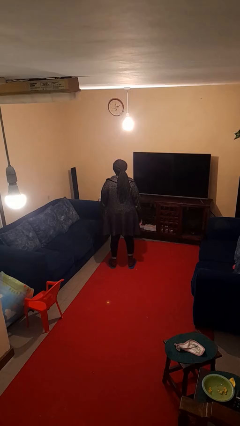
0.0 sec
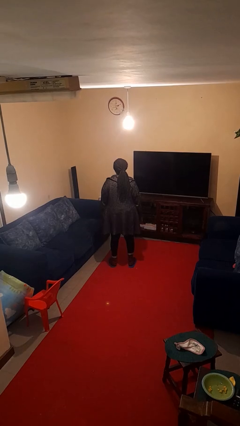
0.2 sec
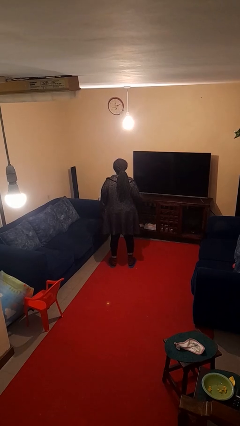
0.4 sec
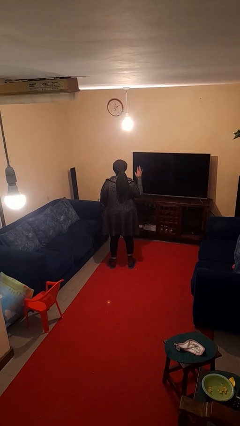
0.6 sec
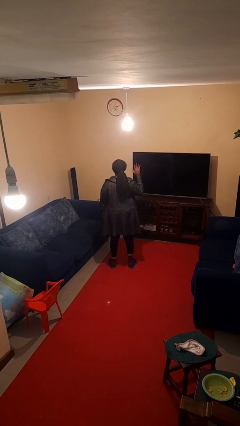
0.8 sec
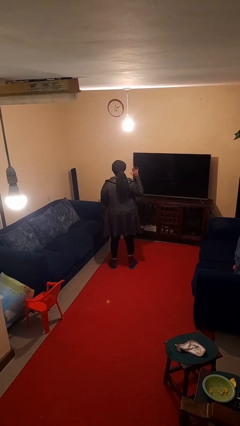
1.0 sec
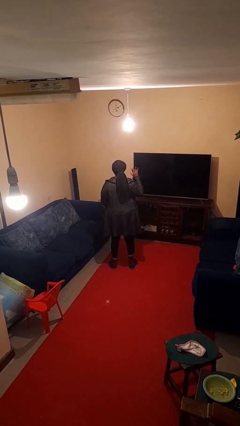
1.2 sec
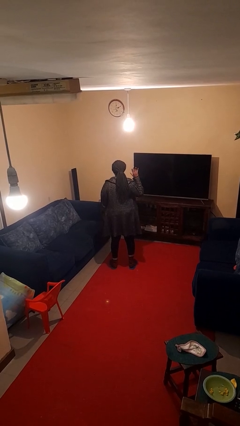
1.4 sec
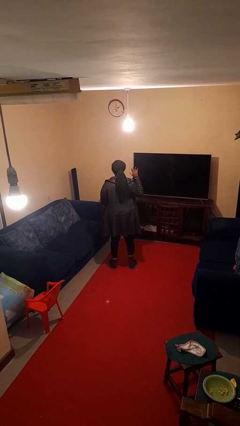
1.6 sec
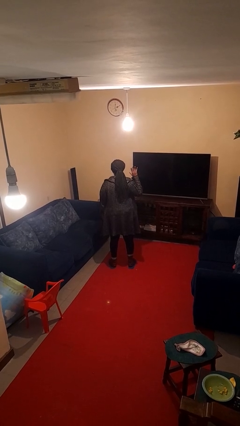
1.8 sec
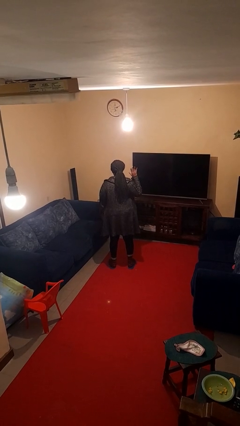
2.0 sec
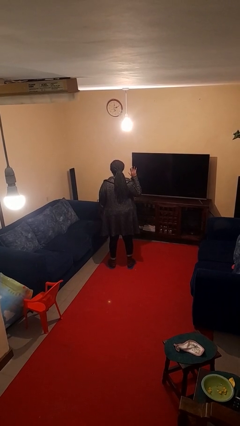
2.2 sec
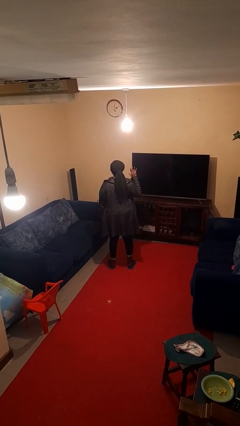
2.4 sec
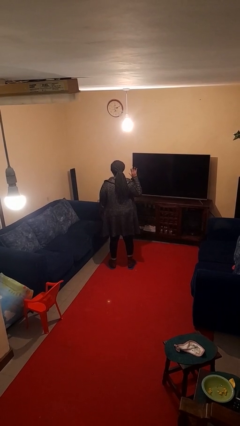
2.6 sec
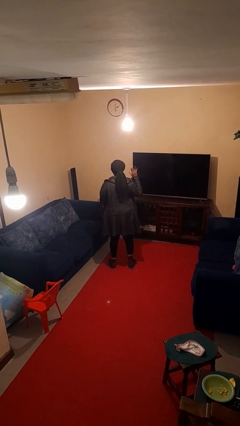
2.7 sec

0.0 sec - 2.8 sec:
person gestures number five

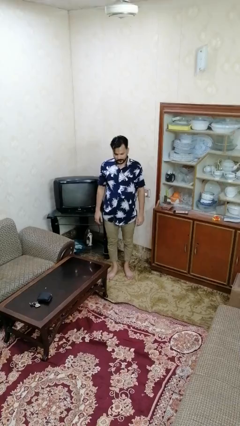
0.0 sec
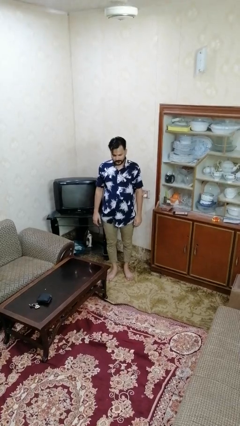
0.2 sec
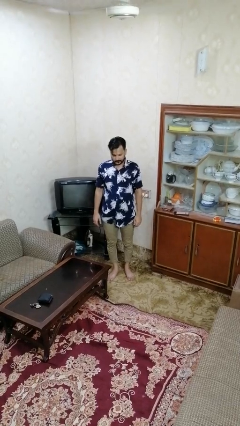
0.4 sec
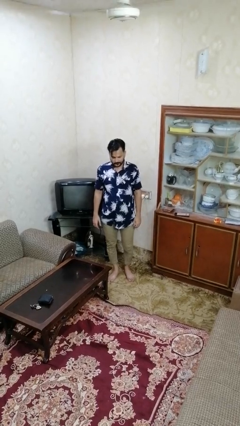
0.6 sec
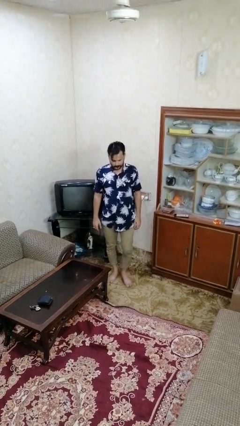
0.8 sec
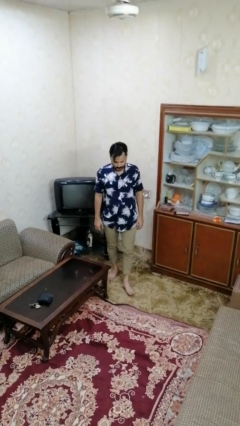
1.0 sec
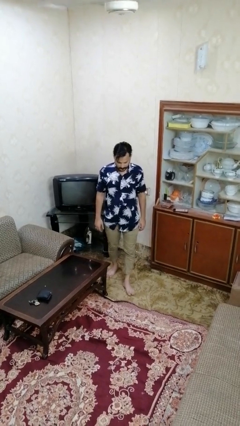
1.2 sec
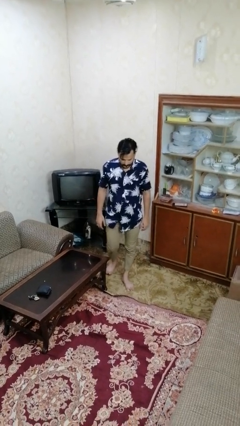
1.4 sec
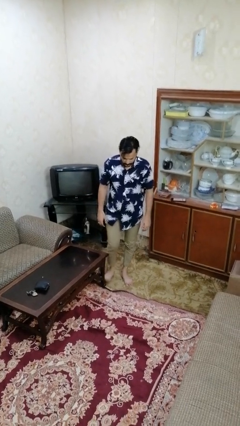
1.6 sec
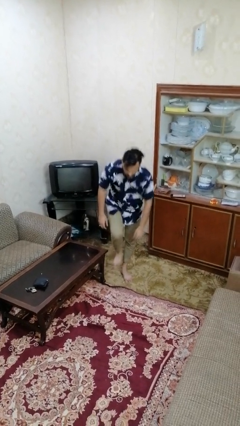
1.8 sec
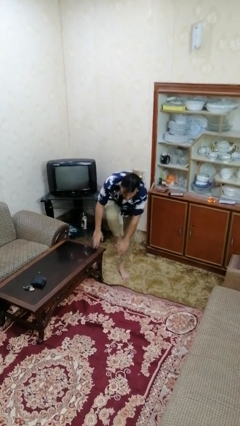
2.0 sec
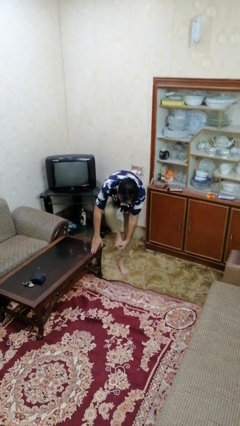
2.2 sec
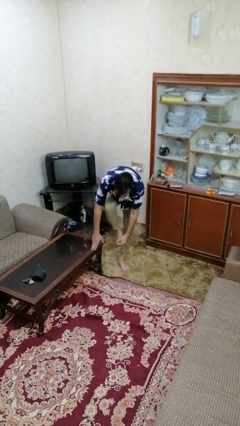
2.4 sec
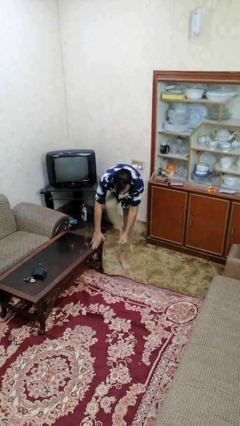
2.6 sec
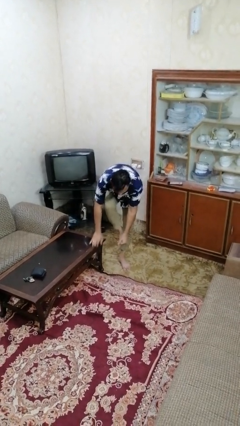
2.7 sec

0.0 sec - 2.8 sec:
person trips on object on floor

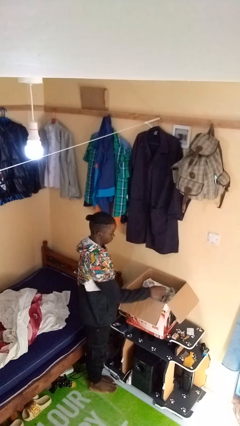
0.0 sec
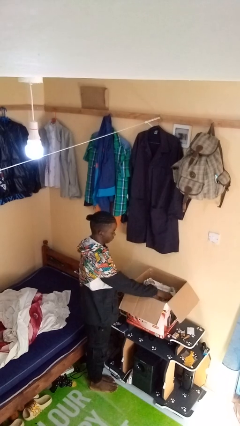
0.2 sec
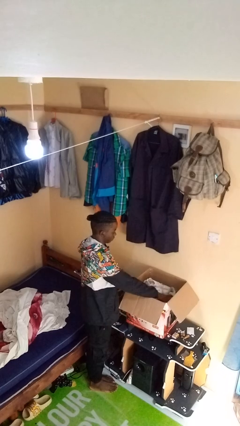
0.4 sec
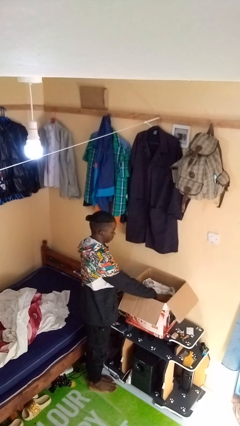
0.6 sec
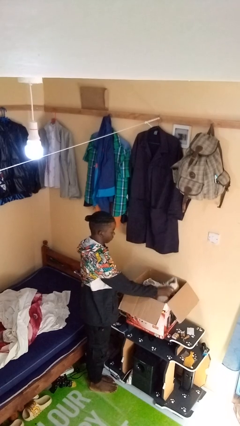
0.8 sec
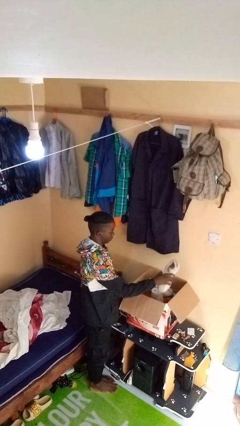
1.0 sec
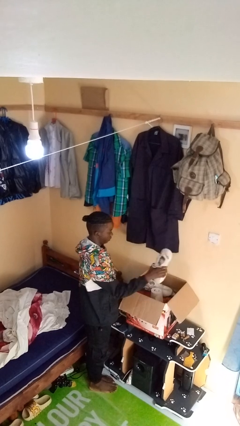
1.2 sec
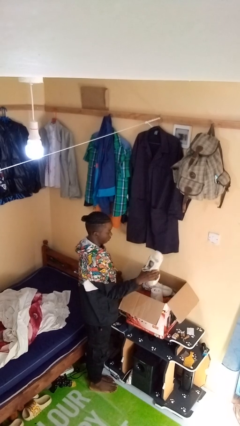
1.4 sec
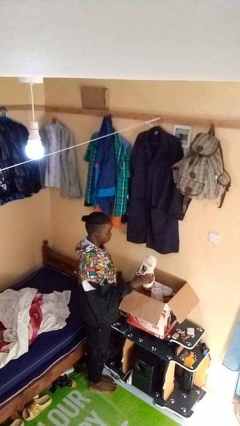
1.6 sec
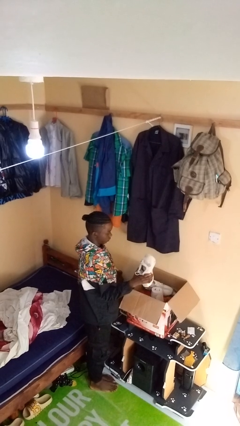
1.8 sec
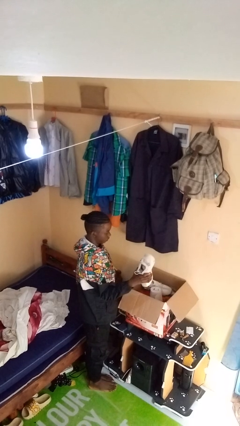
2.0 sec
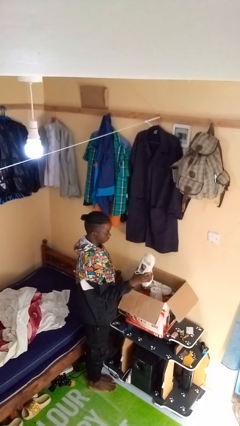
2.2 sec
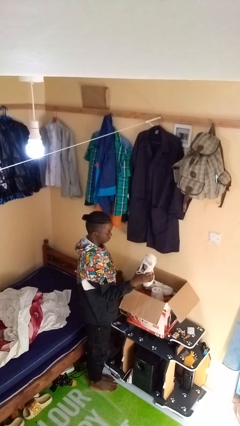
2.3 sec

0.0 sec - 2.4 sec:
person takes object from box

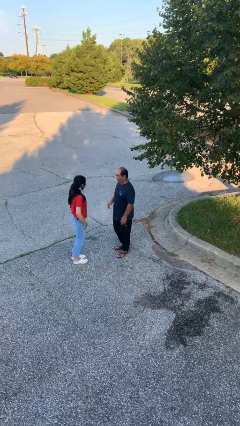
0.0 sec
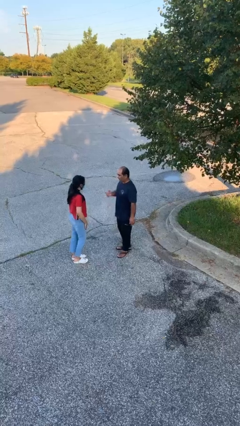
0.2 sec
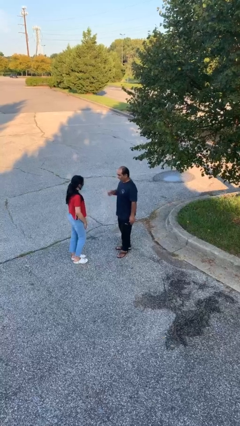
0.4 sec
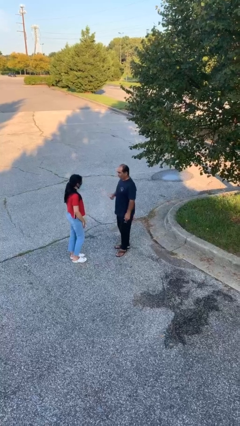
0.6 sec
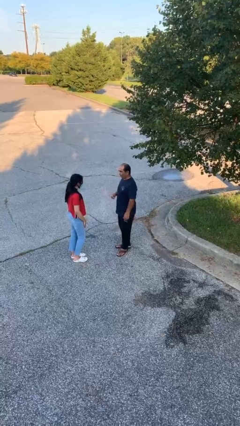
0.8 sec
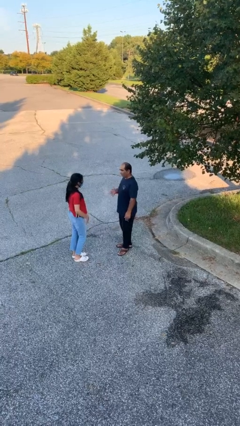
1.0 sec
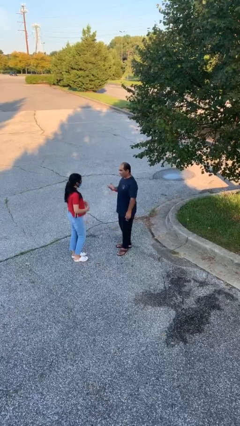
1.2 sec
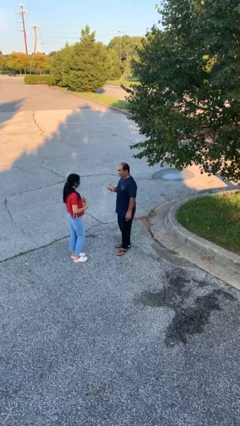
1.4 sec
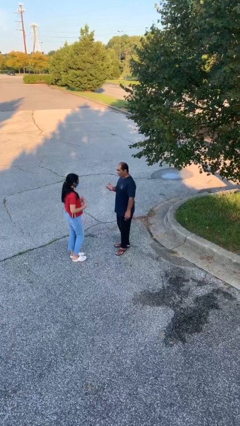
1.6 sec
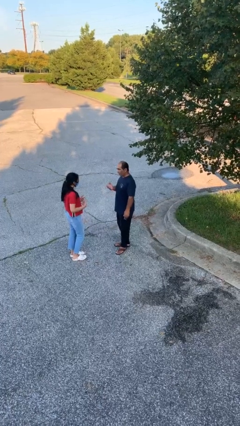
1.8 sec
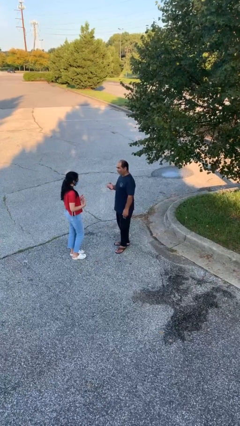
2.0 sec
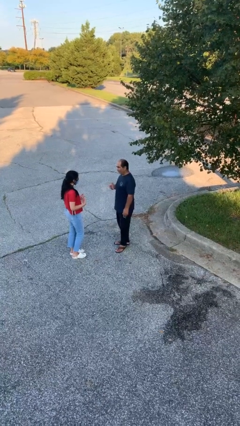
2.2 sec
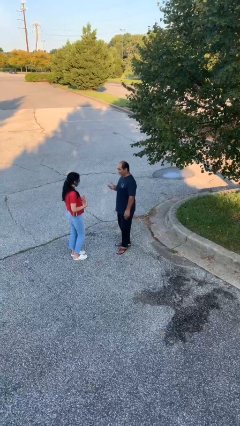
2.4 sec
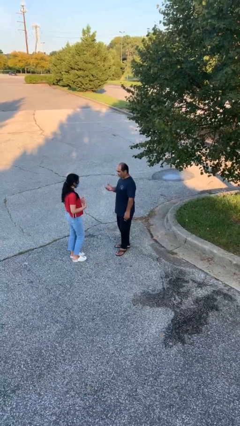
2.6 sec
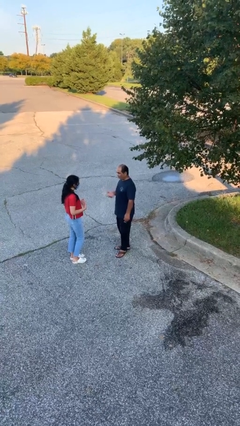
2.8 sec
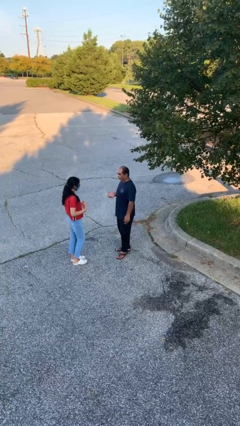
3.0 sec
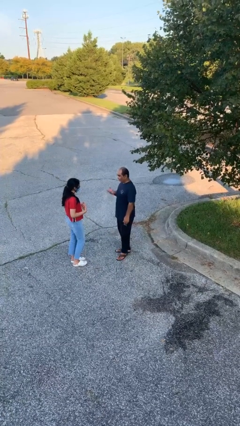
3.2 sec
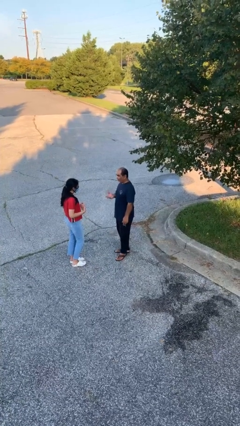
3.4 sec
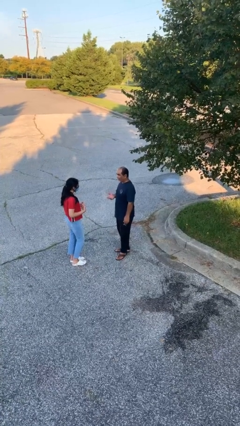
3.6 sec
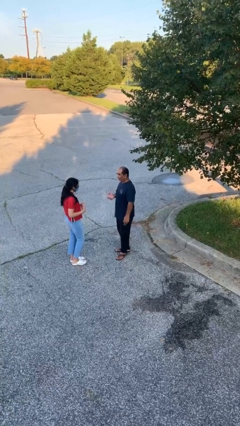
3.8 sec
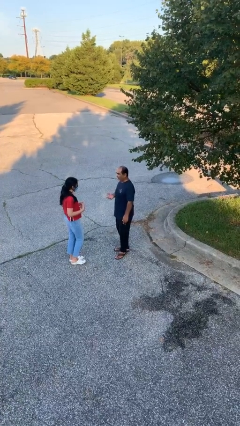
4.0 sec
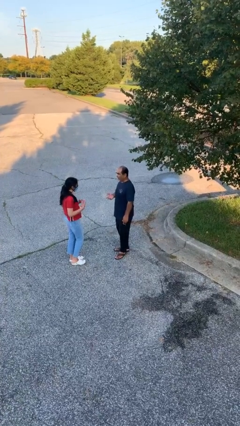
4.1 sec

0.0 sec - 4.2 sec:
person talks to person

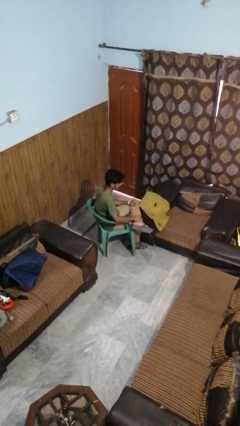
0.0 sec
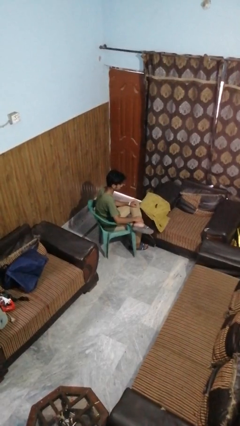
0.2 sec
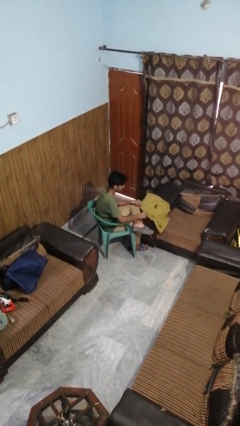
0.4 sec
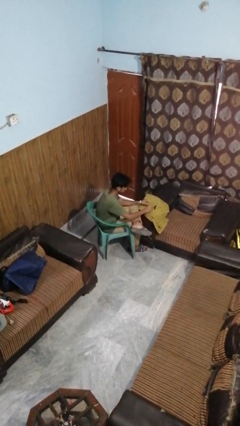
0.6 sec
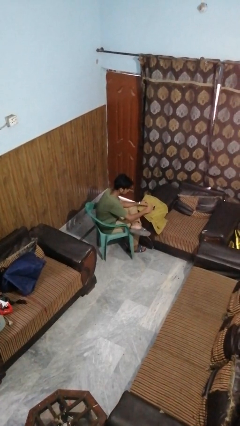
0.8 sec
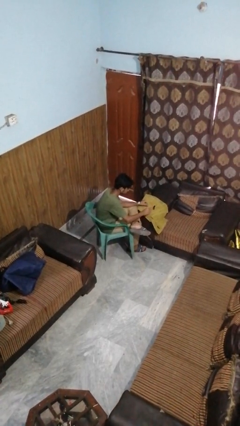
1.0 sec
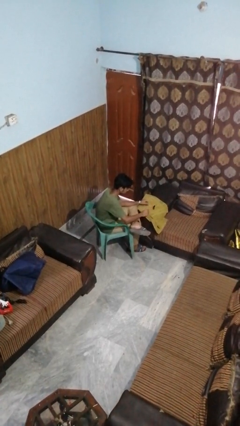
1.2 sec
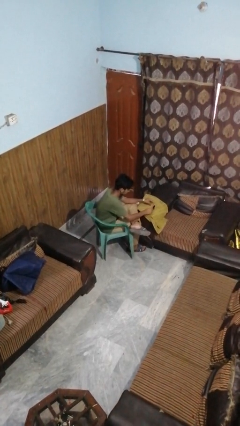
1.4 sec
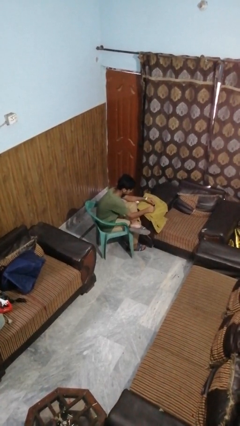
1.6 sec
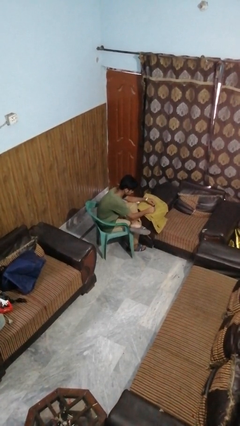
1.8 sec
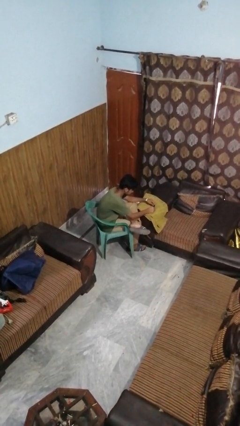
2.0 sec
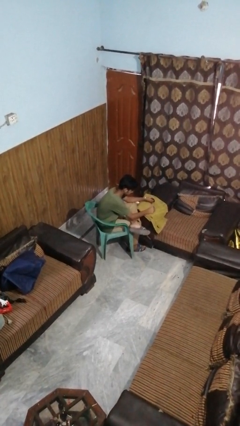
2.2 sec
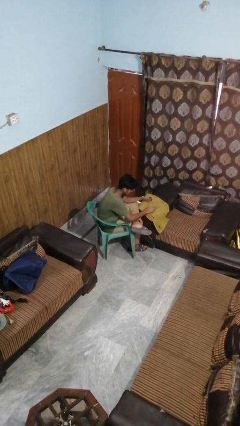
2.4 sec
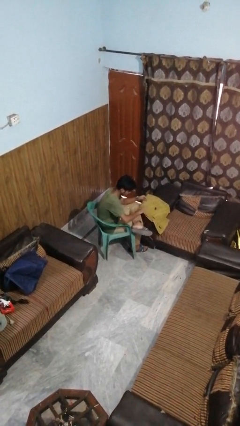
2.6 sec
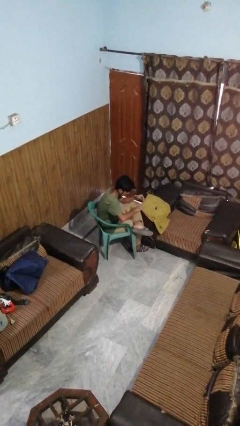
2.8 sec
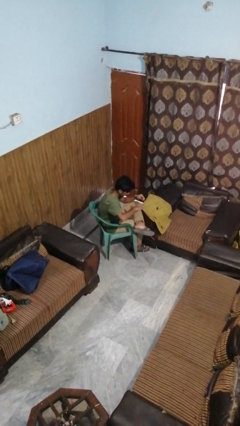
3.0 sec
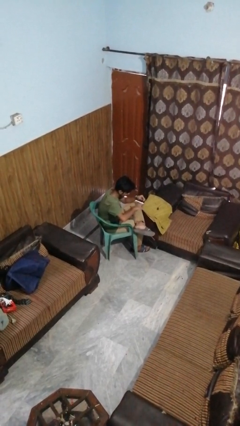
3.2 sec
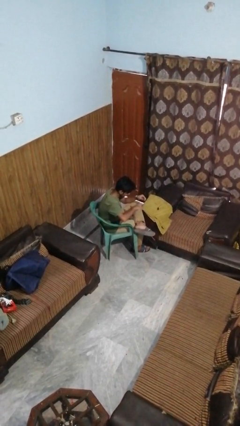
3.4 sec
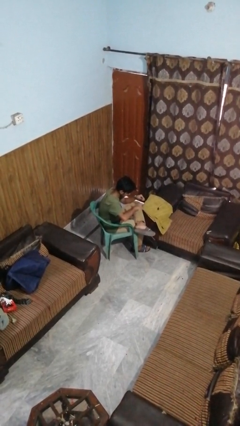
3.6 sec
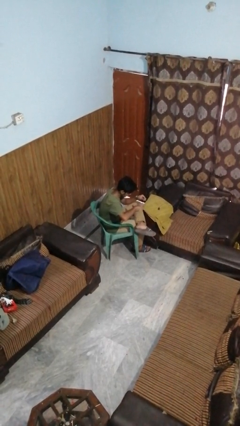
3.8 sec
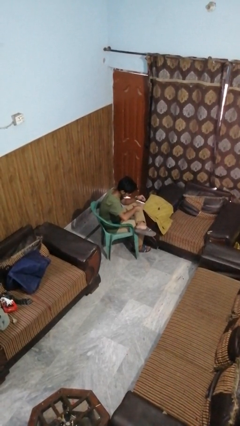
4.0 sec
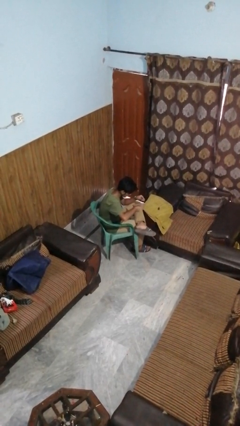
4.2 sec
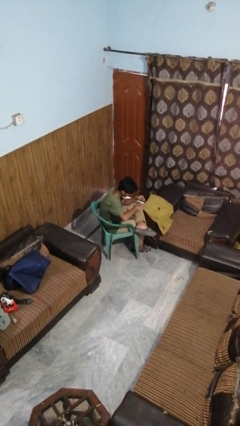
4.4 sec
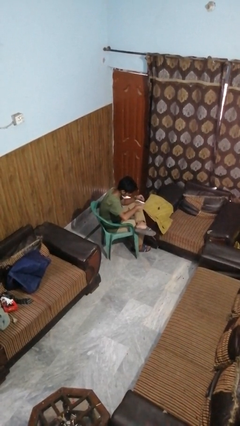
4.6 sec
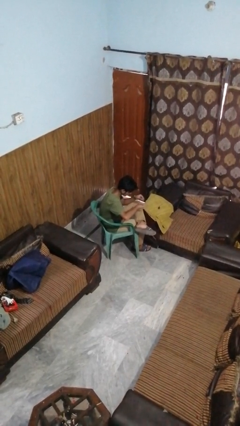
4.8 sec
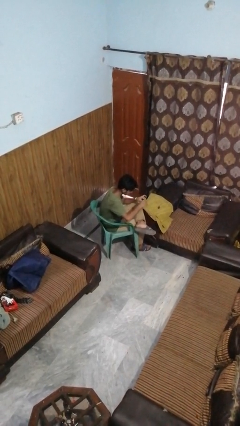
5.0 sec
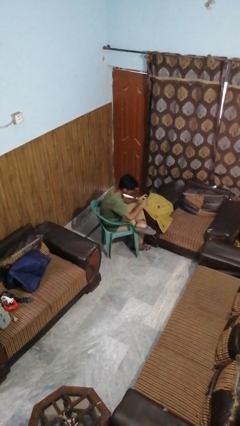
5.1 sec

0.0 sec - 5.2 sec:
person paints fingernails
